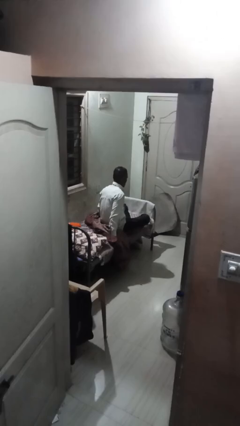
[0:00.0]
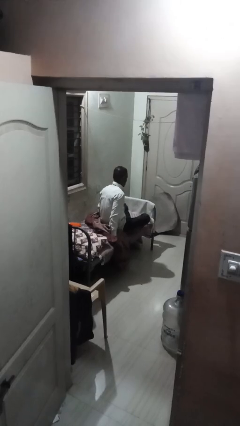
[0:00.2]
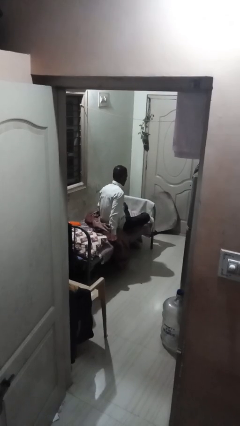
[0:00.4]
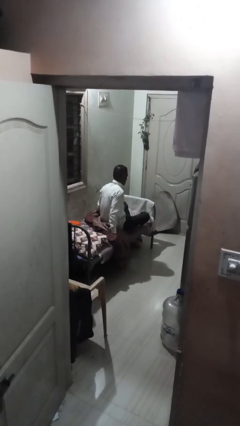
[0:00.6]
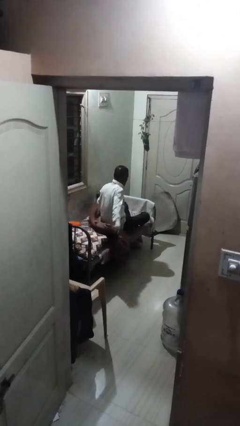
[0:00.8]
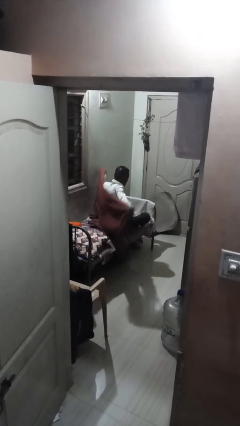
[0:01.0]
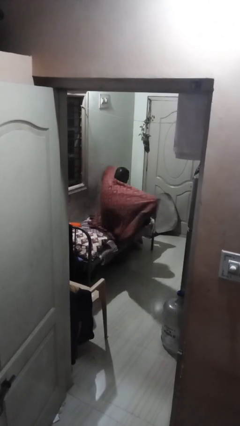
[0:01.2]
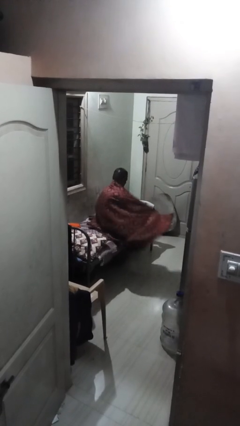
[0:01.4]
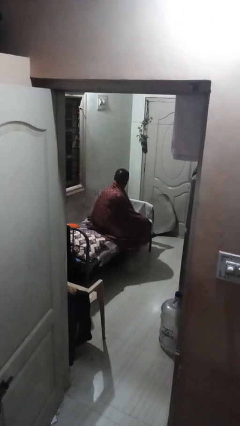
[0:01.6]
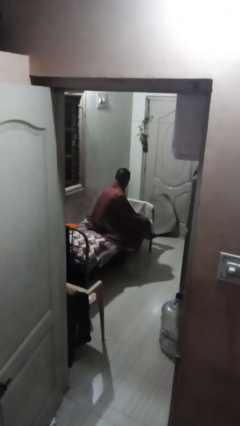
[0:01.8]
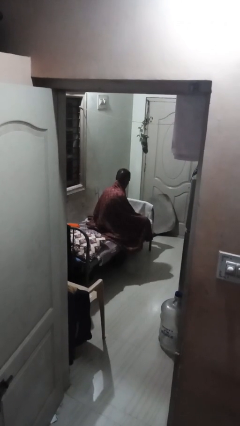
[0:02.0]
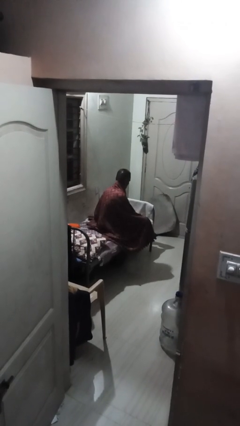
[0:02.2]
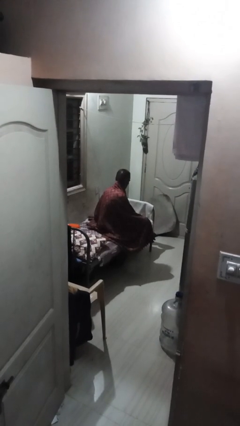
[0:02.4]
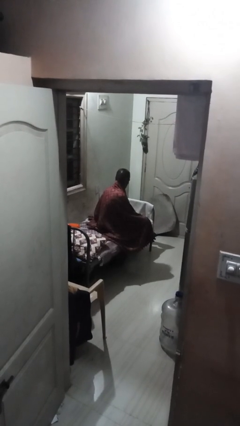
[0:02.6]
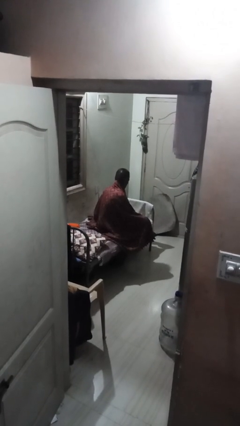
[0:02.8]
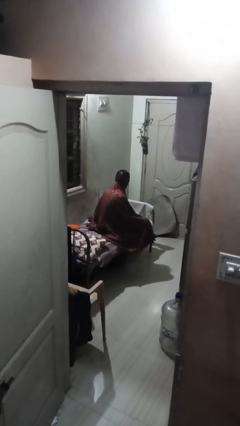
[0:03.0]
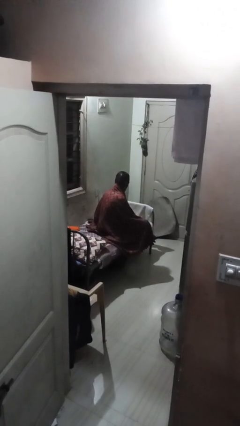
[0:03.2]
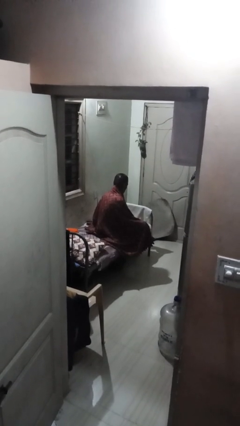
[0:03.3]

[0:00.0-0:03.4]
person covers with blanket

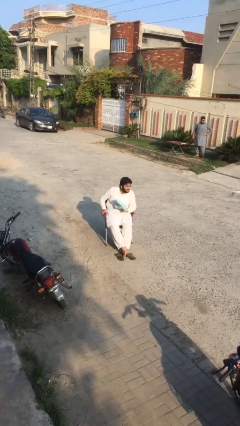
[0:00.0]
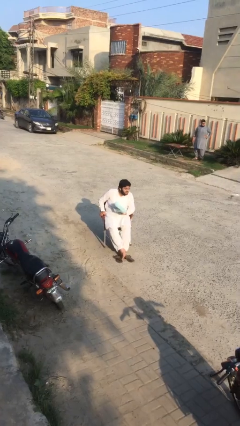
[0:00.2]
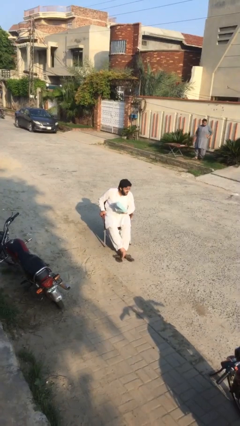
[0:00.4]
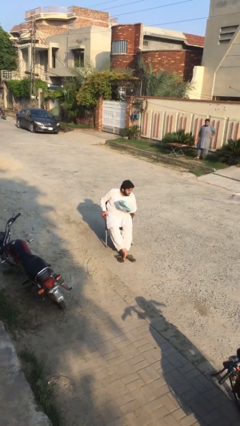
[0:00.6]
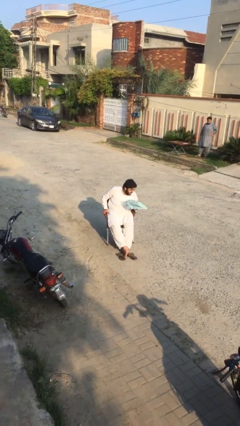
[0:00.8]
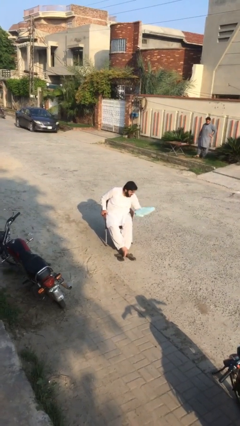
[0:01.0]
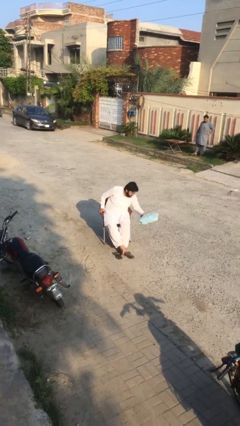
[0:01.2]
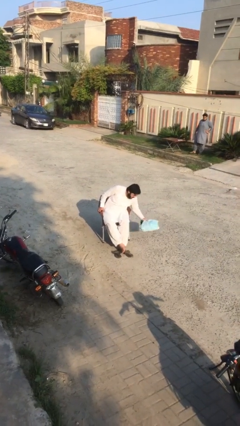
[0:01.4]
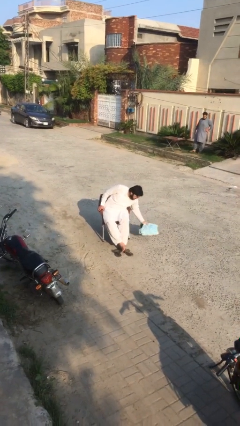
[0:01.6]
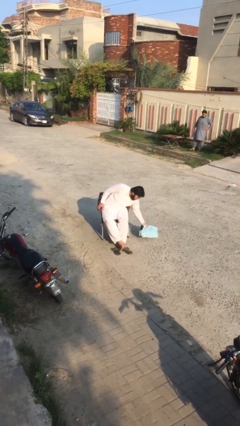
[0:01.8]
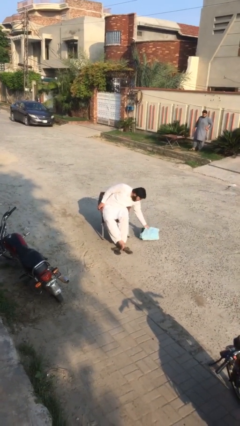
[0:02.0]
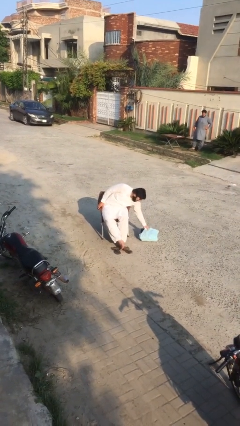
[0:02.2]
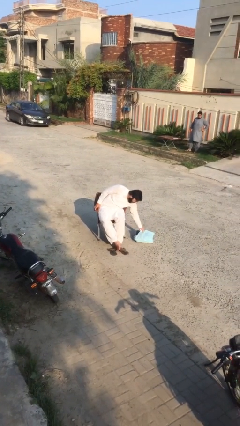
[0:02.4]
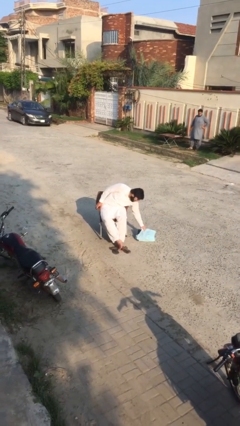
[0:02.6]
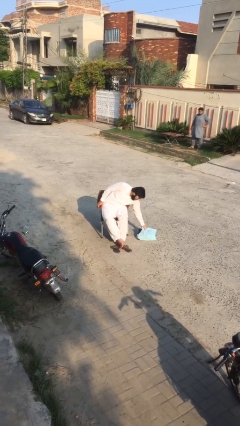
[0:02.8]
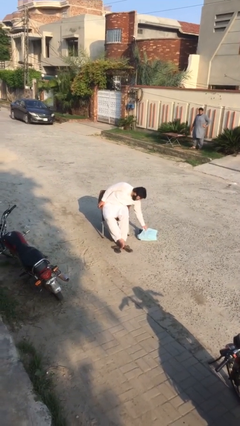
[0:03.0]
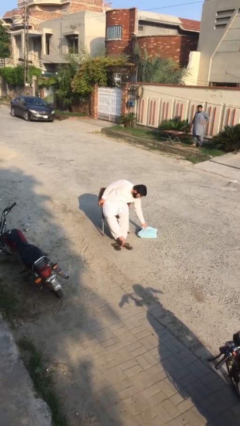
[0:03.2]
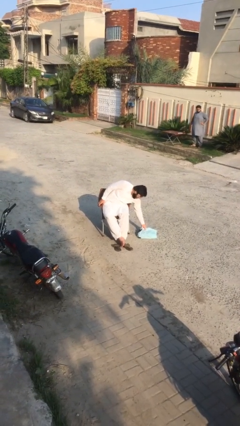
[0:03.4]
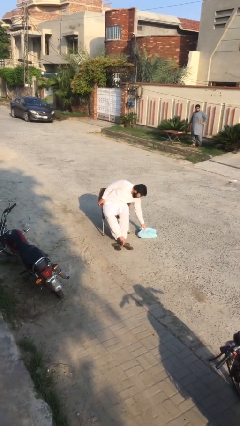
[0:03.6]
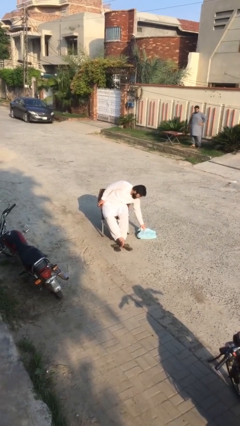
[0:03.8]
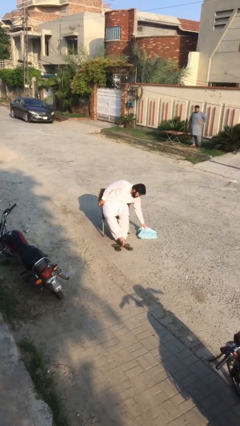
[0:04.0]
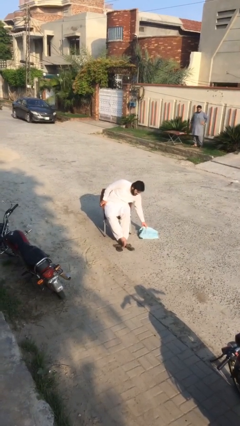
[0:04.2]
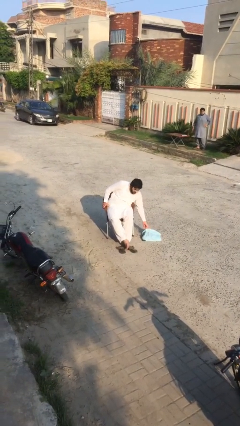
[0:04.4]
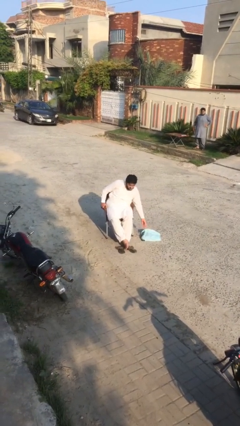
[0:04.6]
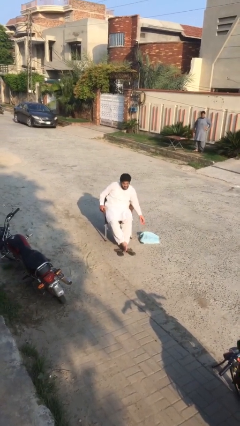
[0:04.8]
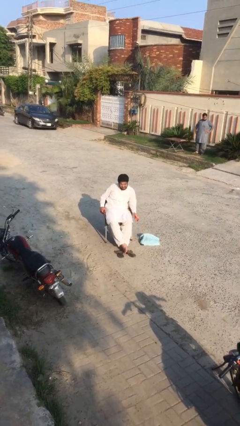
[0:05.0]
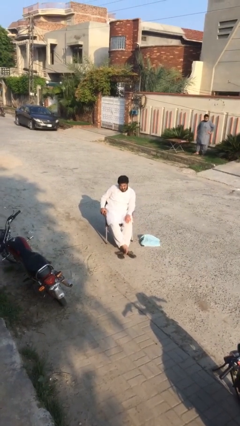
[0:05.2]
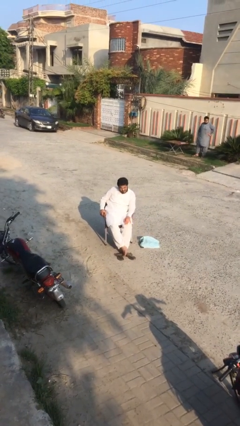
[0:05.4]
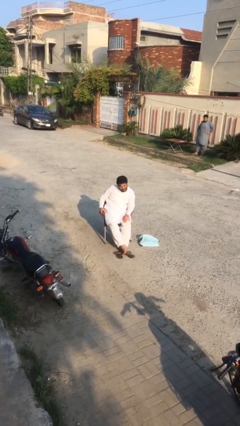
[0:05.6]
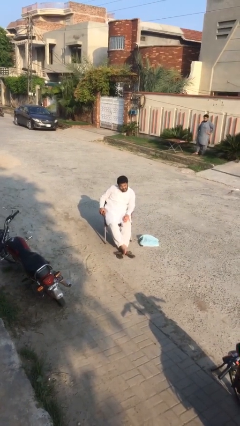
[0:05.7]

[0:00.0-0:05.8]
person puts down object on floor

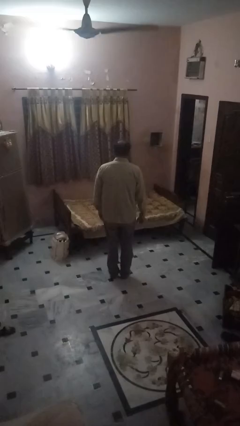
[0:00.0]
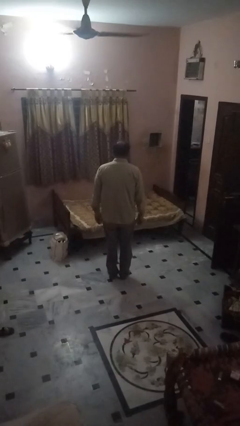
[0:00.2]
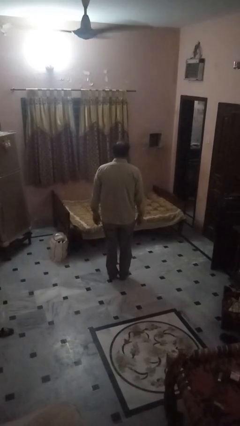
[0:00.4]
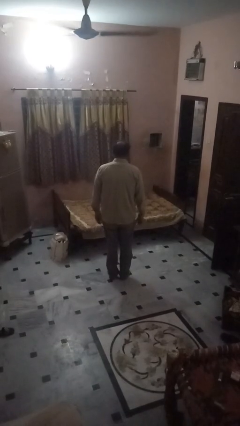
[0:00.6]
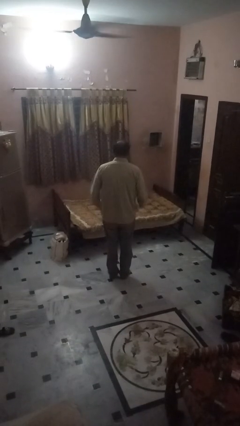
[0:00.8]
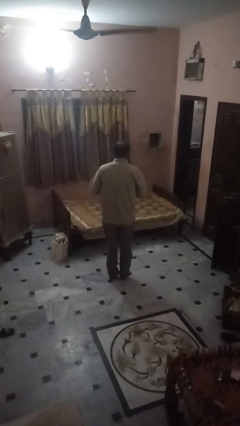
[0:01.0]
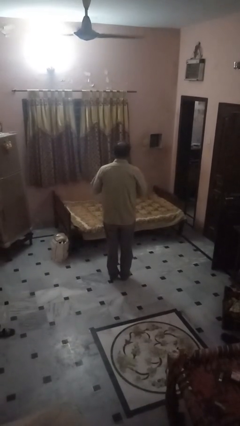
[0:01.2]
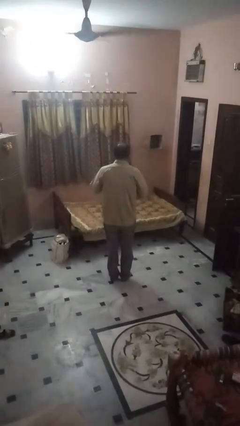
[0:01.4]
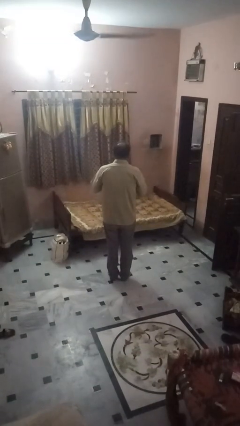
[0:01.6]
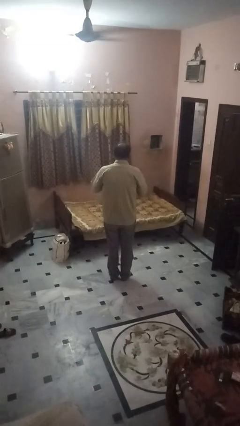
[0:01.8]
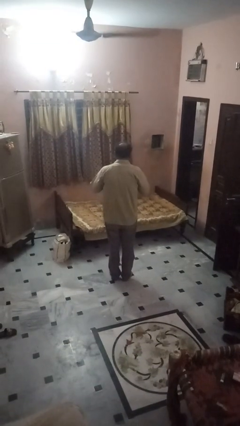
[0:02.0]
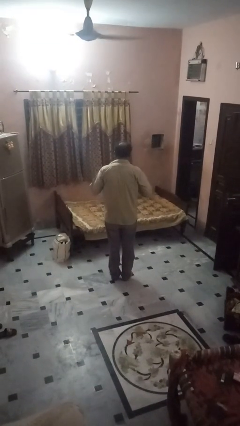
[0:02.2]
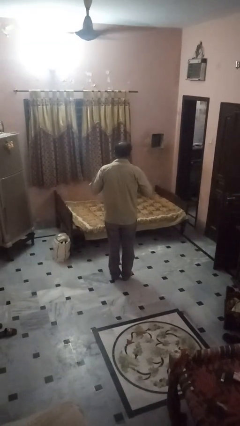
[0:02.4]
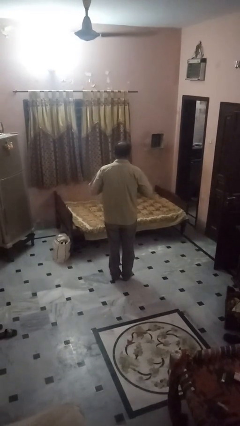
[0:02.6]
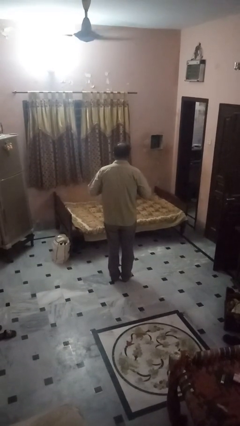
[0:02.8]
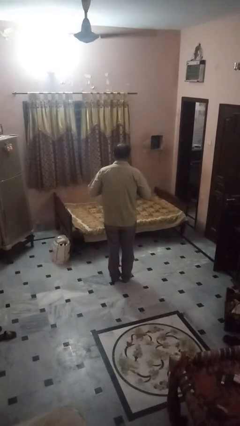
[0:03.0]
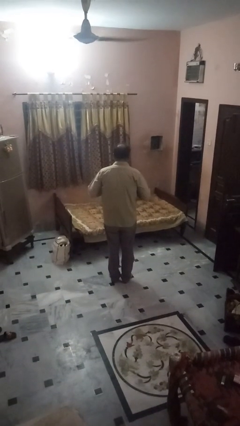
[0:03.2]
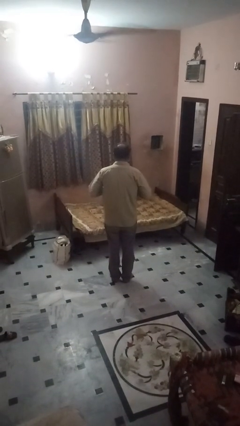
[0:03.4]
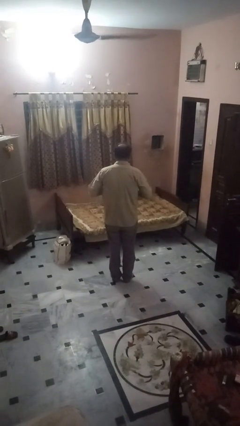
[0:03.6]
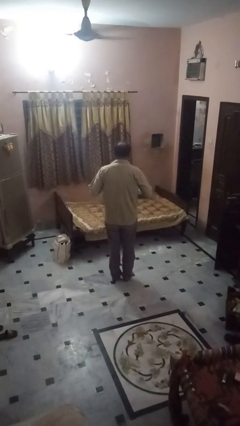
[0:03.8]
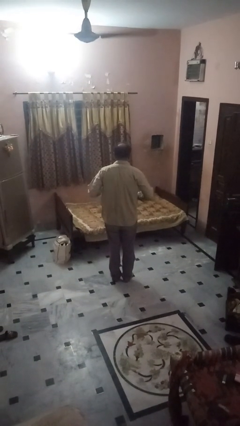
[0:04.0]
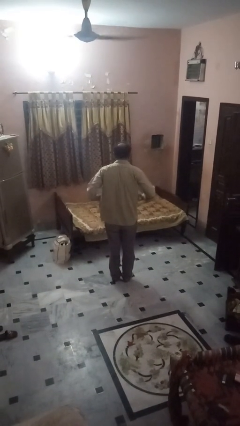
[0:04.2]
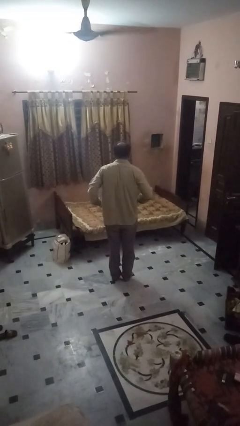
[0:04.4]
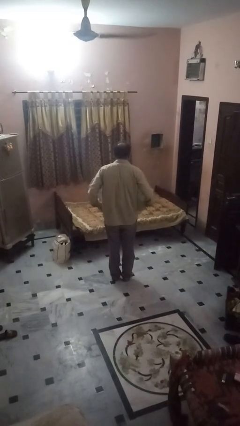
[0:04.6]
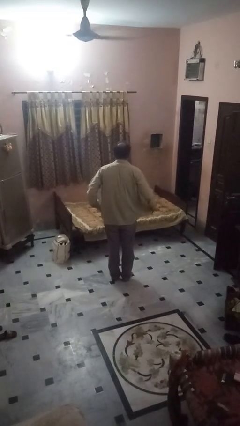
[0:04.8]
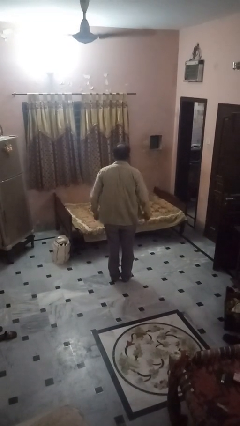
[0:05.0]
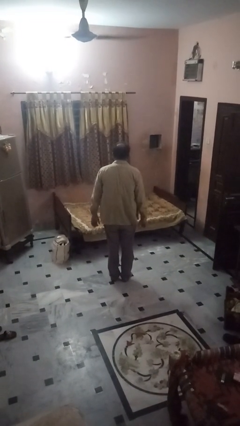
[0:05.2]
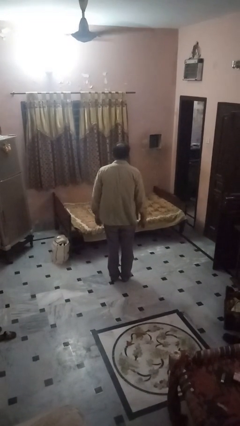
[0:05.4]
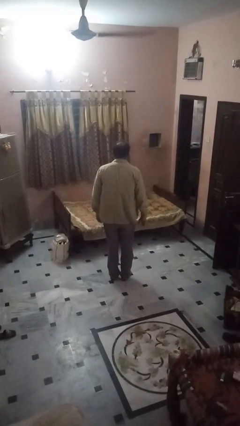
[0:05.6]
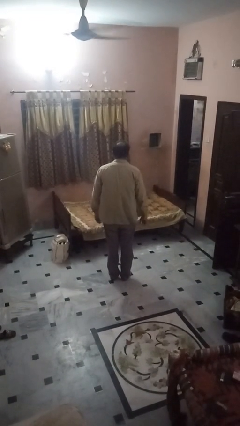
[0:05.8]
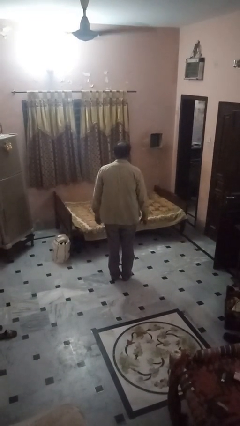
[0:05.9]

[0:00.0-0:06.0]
person unbuttons shirt

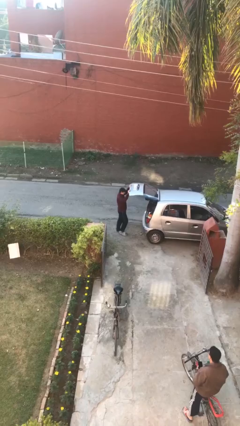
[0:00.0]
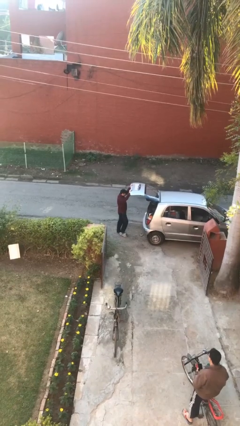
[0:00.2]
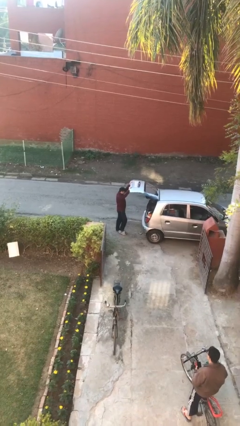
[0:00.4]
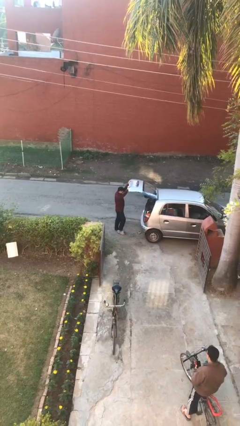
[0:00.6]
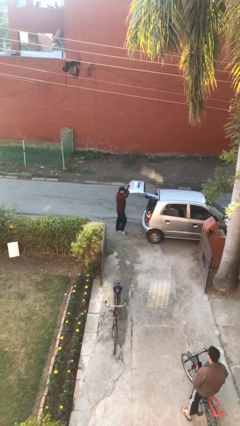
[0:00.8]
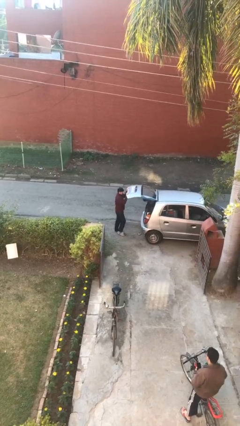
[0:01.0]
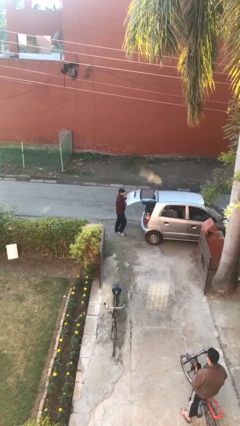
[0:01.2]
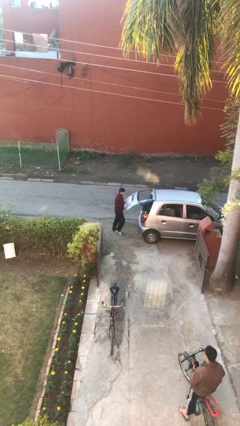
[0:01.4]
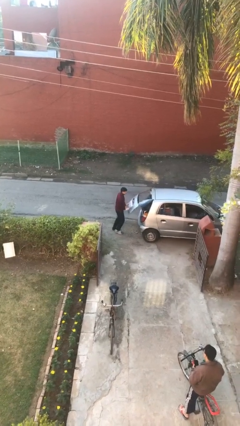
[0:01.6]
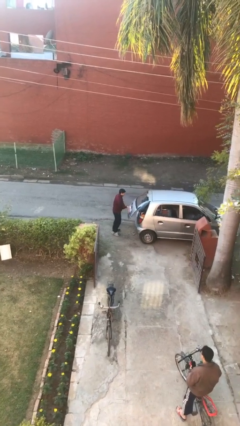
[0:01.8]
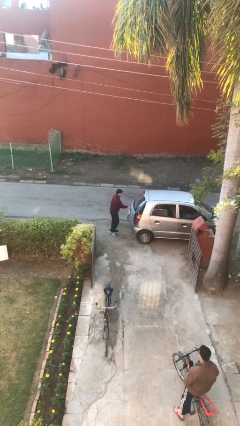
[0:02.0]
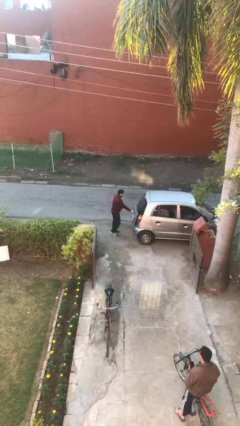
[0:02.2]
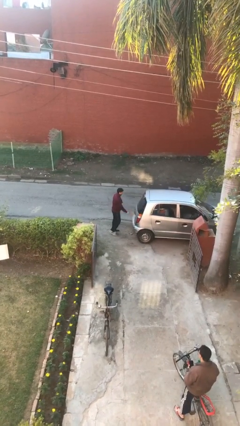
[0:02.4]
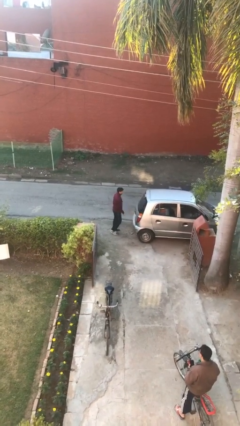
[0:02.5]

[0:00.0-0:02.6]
person closes car trunk
